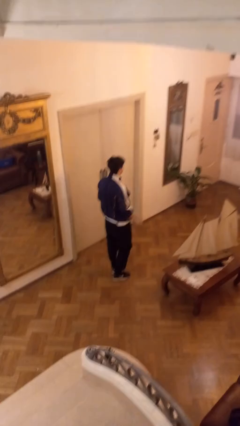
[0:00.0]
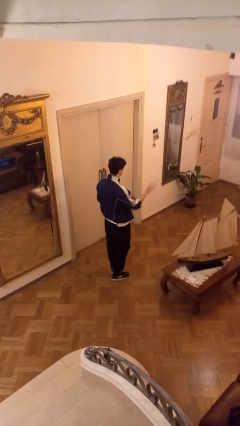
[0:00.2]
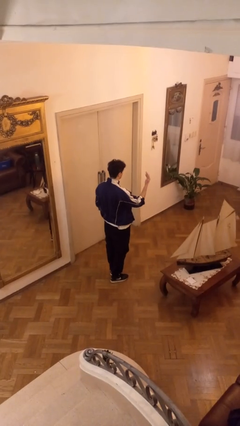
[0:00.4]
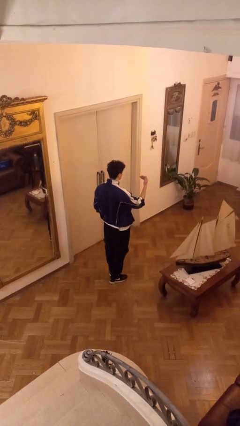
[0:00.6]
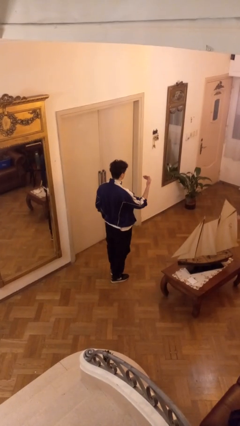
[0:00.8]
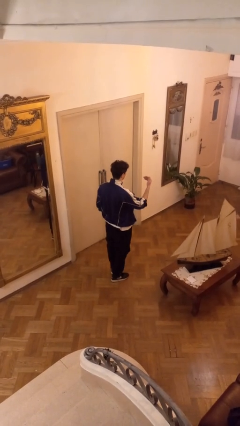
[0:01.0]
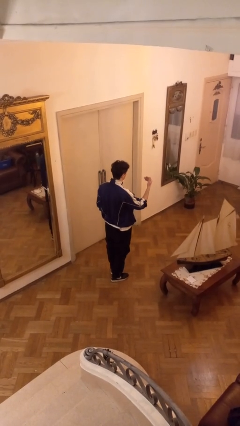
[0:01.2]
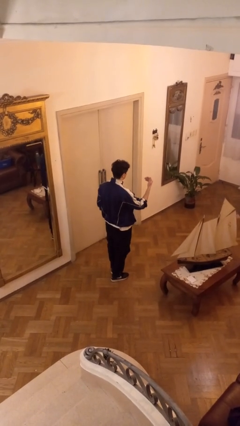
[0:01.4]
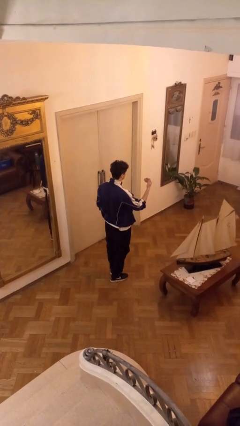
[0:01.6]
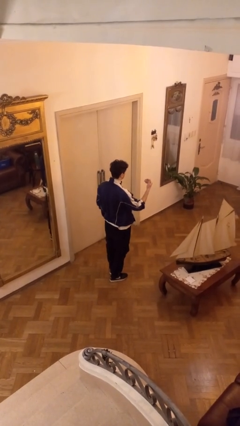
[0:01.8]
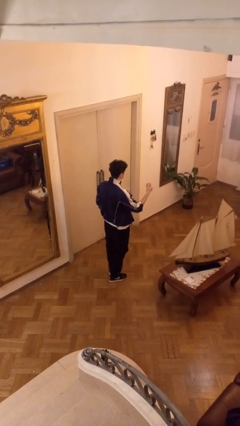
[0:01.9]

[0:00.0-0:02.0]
person gestures come here

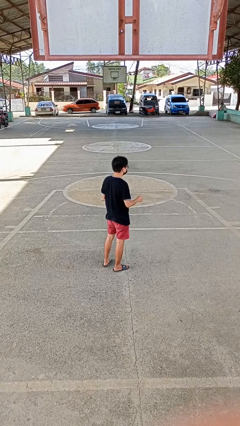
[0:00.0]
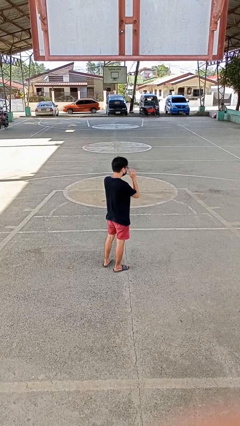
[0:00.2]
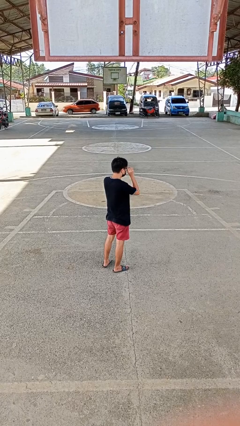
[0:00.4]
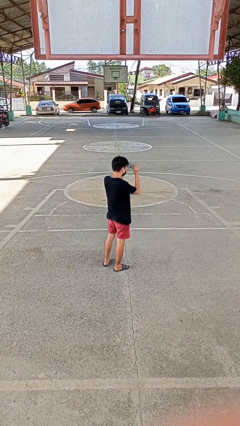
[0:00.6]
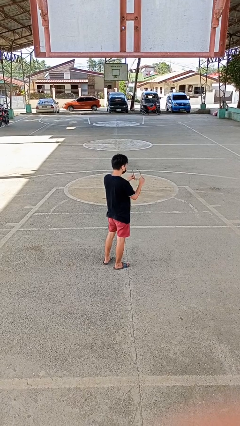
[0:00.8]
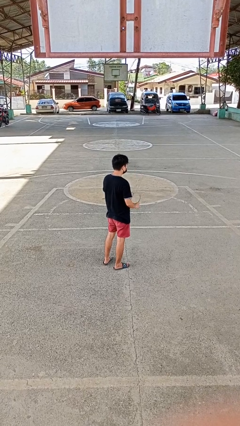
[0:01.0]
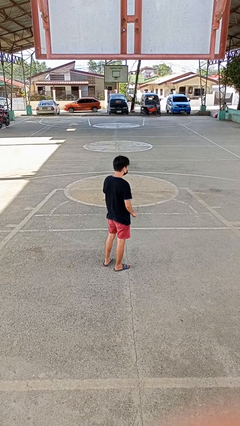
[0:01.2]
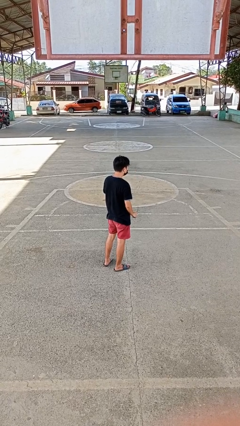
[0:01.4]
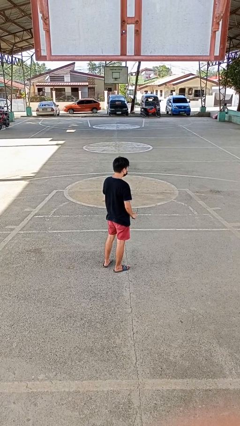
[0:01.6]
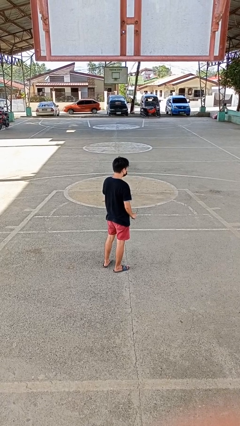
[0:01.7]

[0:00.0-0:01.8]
person takes off glasses

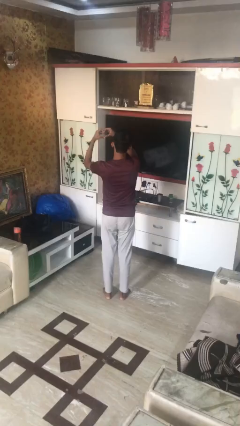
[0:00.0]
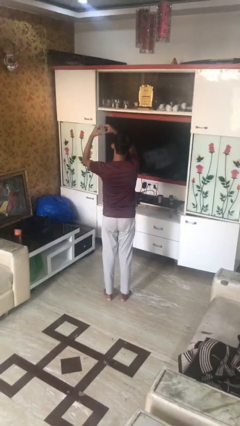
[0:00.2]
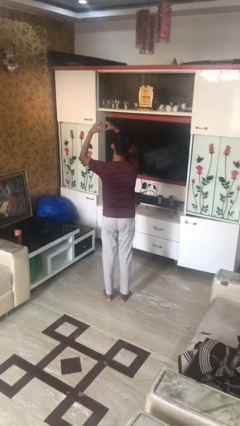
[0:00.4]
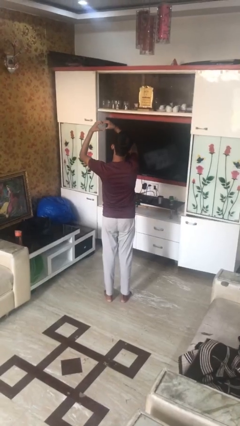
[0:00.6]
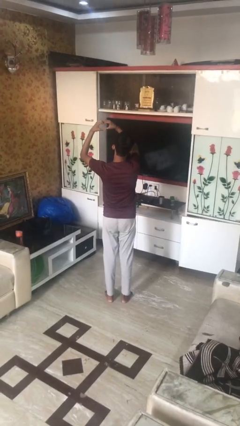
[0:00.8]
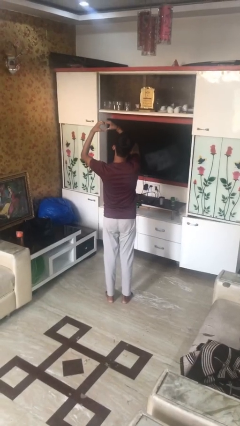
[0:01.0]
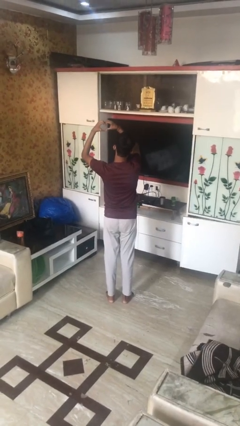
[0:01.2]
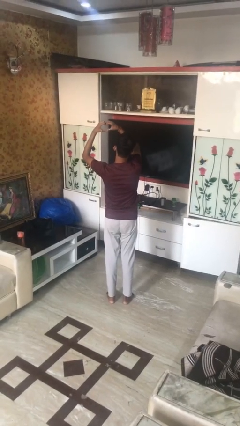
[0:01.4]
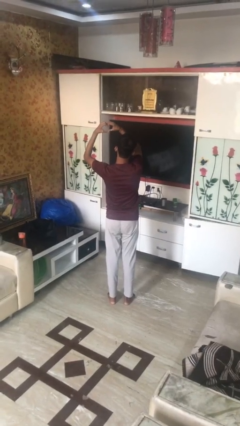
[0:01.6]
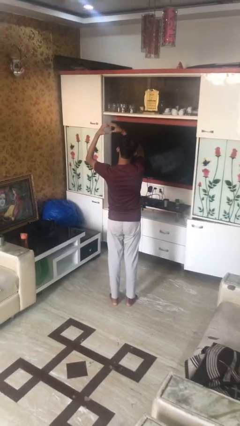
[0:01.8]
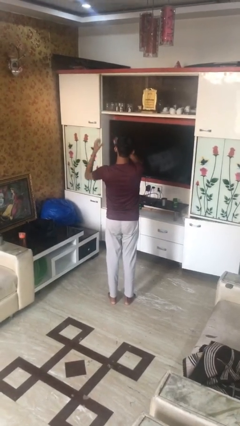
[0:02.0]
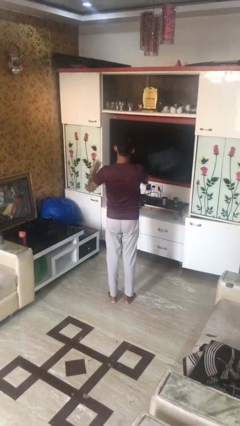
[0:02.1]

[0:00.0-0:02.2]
person gestures heart

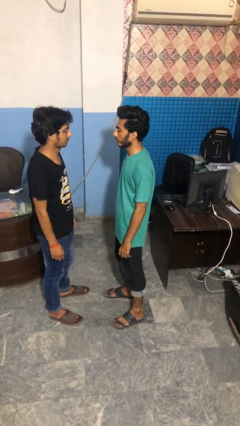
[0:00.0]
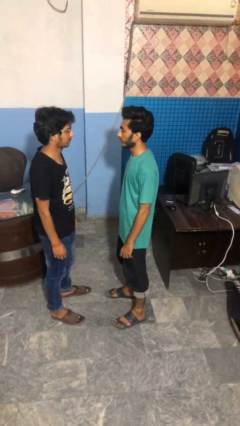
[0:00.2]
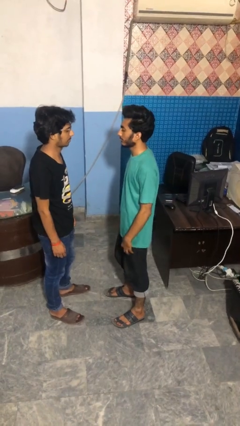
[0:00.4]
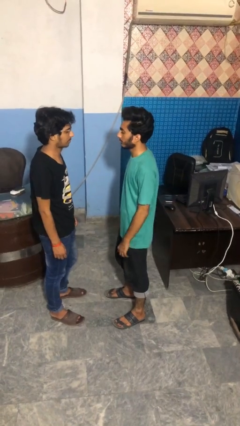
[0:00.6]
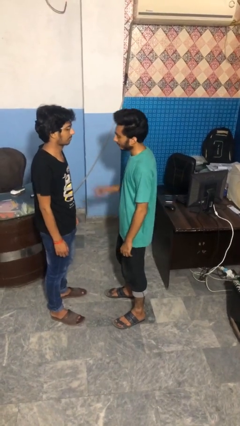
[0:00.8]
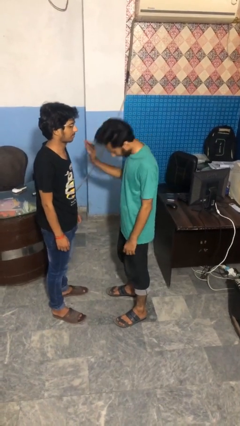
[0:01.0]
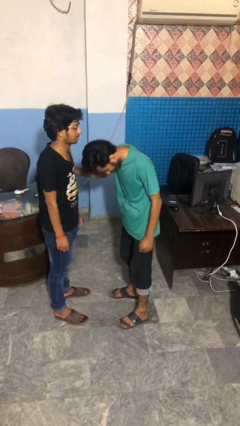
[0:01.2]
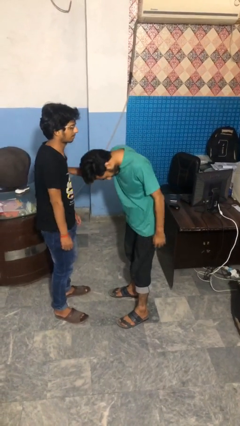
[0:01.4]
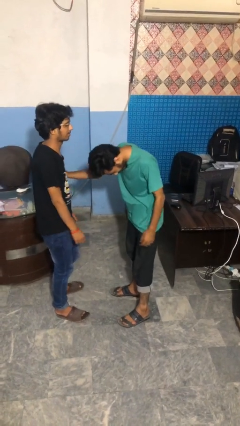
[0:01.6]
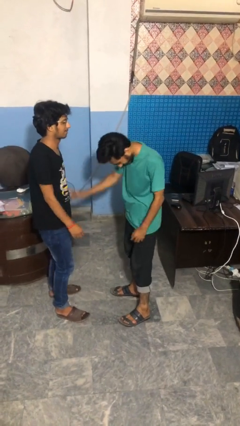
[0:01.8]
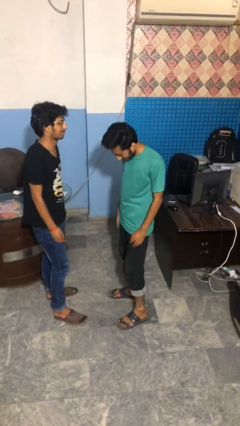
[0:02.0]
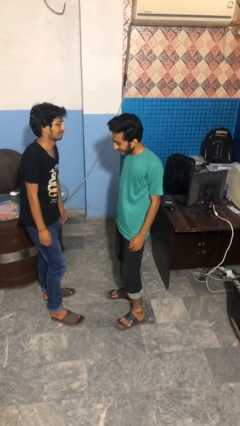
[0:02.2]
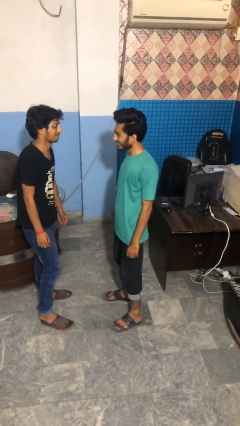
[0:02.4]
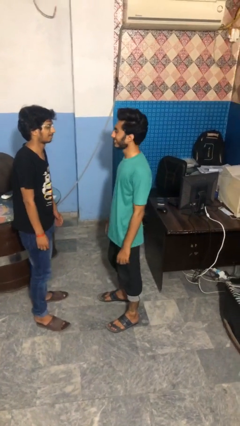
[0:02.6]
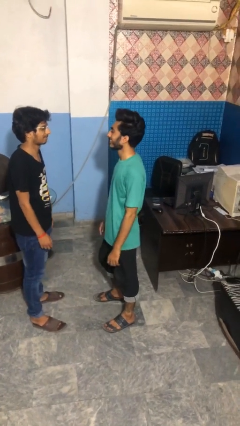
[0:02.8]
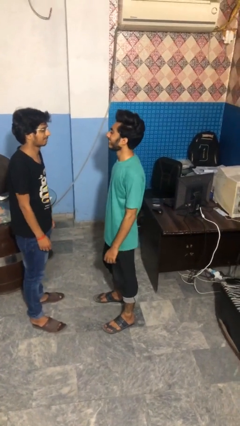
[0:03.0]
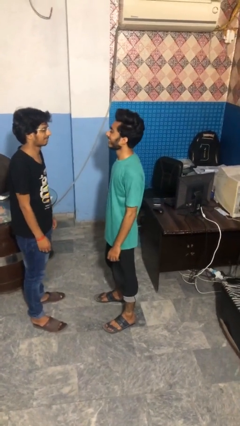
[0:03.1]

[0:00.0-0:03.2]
person shoves person

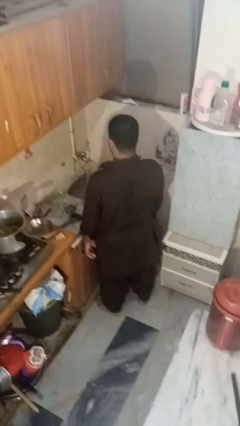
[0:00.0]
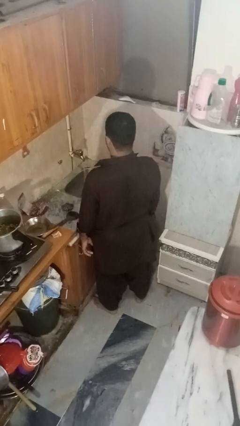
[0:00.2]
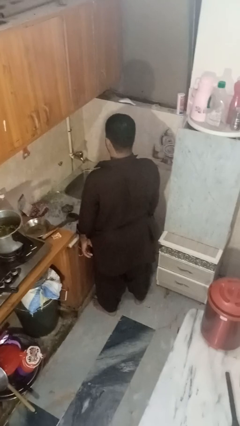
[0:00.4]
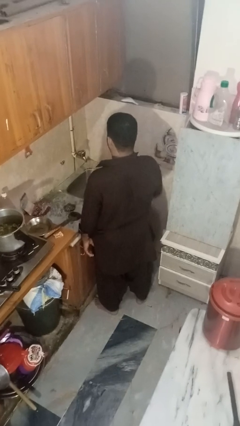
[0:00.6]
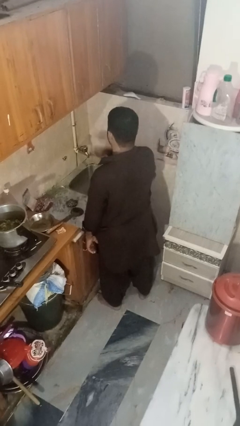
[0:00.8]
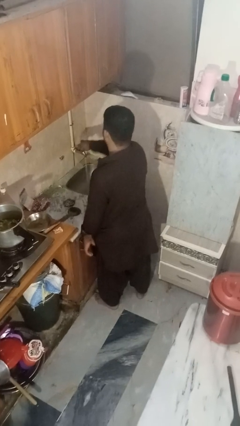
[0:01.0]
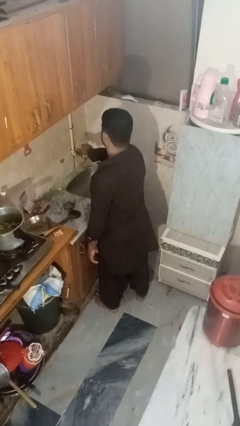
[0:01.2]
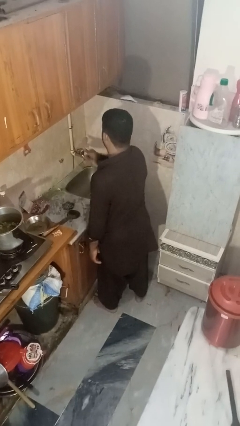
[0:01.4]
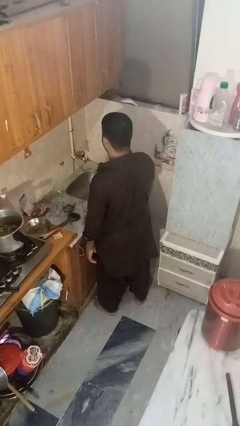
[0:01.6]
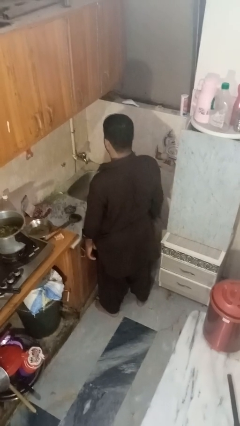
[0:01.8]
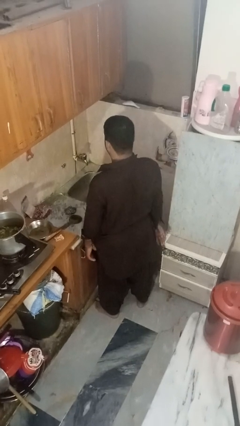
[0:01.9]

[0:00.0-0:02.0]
person turns off faucet

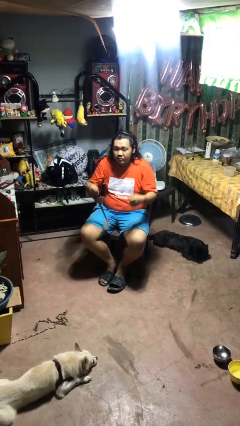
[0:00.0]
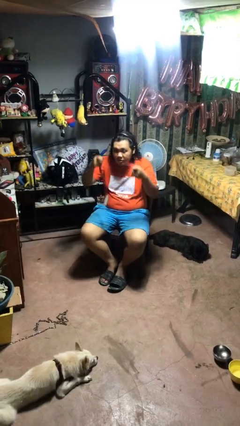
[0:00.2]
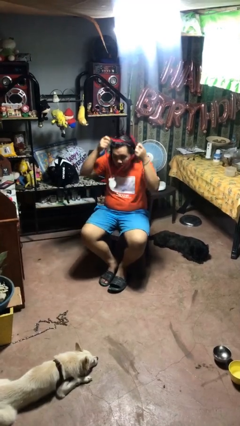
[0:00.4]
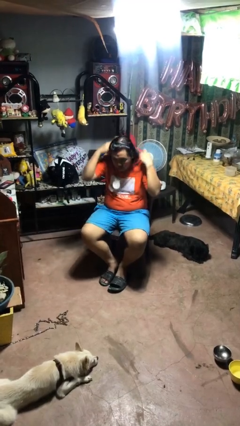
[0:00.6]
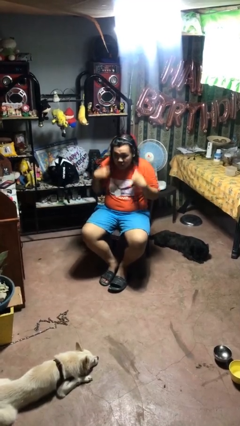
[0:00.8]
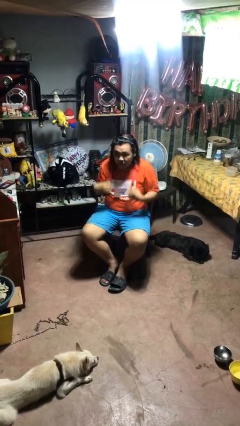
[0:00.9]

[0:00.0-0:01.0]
person puts on necklace

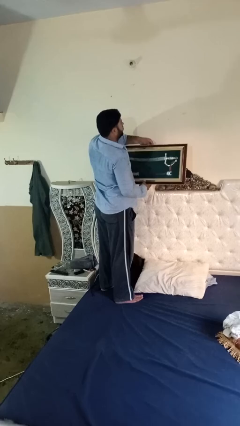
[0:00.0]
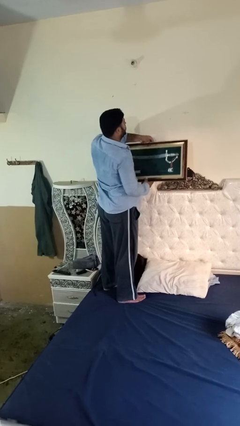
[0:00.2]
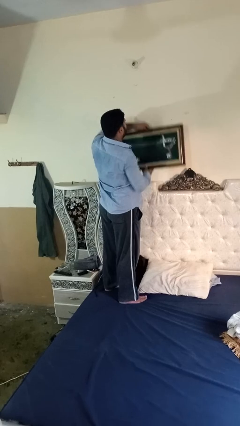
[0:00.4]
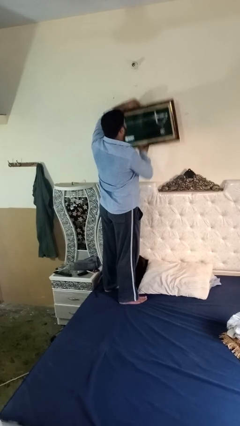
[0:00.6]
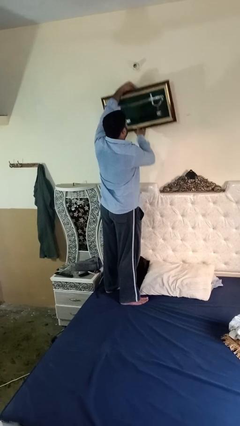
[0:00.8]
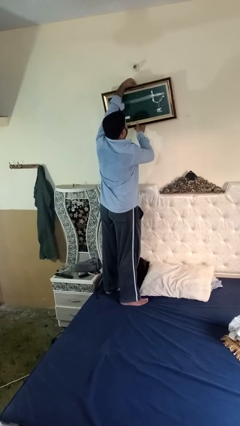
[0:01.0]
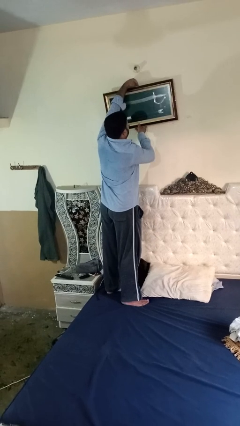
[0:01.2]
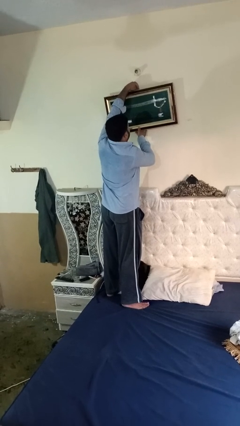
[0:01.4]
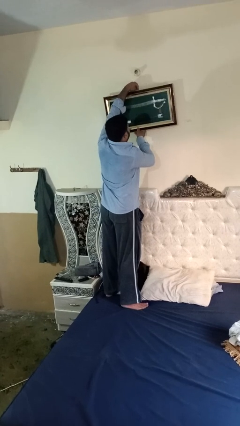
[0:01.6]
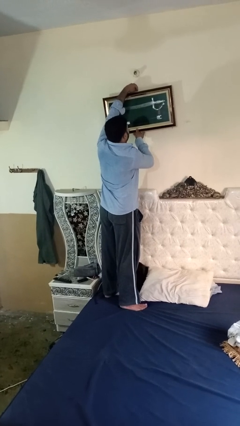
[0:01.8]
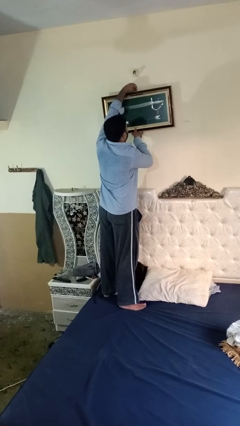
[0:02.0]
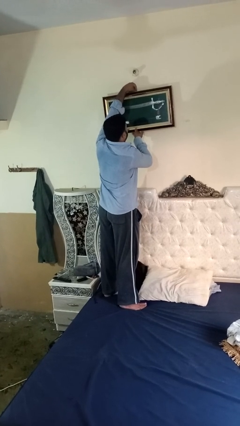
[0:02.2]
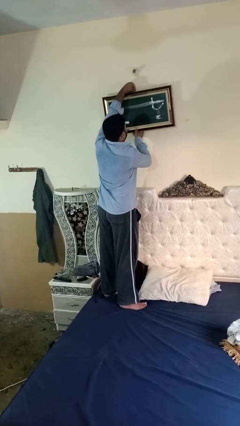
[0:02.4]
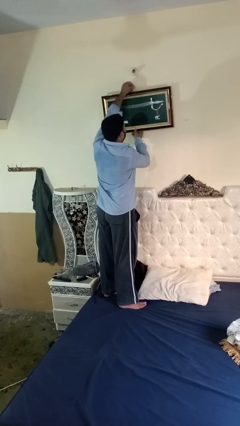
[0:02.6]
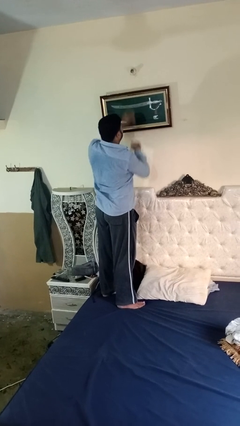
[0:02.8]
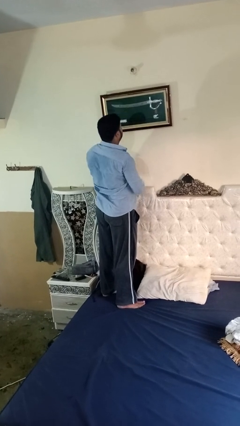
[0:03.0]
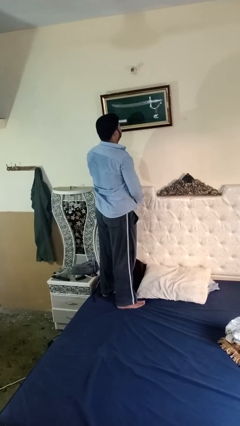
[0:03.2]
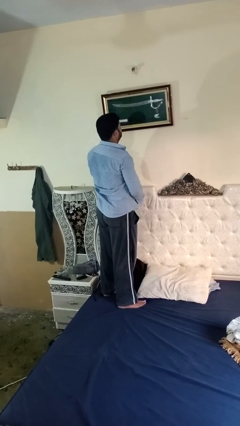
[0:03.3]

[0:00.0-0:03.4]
person puts up picture frame

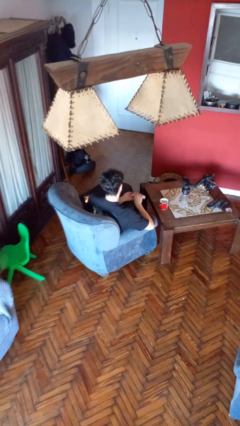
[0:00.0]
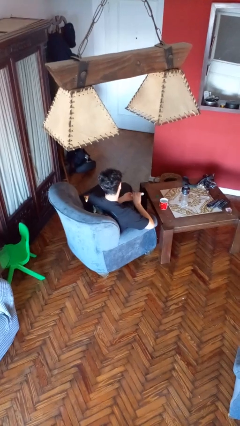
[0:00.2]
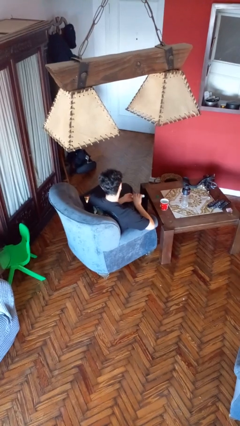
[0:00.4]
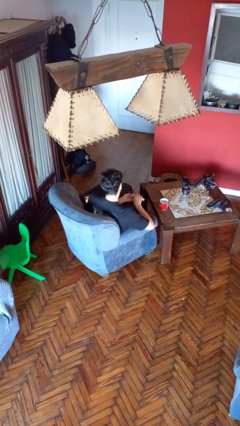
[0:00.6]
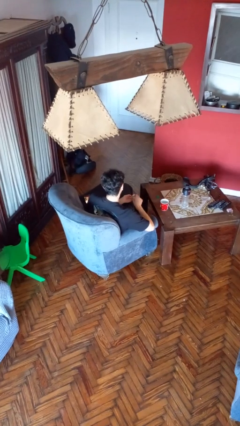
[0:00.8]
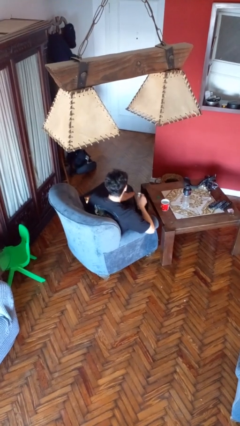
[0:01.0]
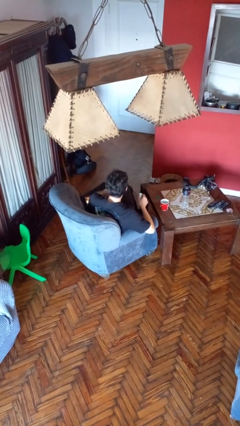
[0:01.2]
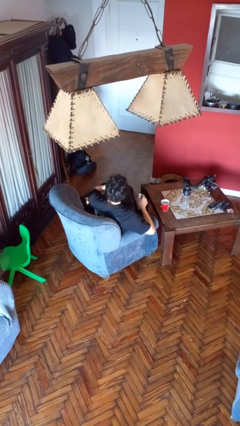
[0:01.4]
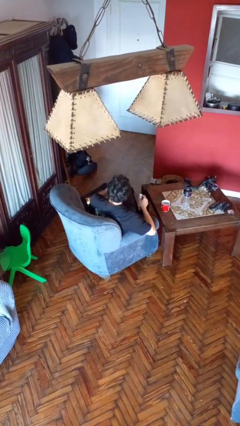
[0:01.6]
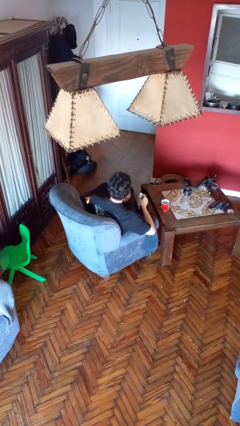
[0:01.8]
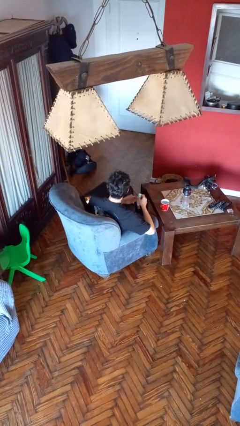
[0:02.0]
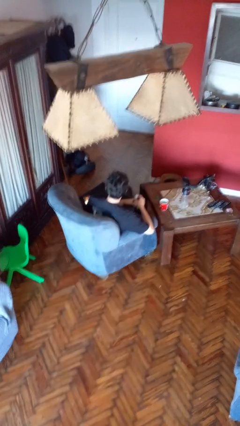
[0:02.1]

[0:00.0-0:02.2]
person takes medicine pills
